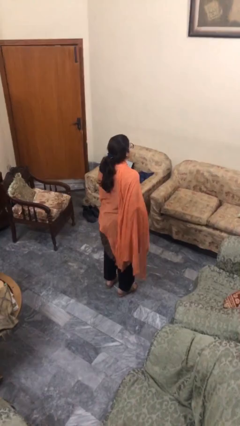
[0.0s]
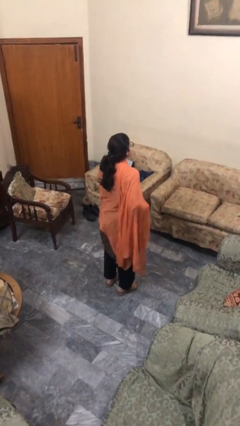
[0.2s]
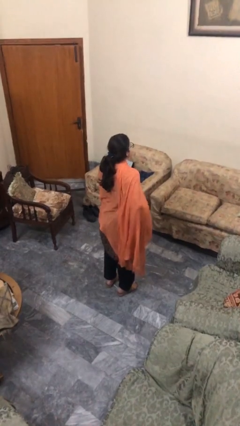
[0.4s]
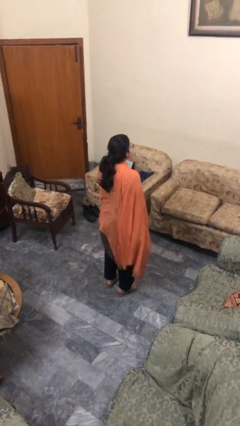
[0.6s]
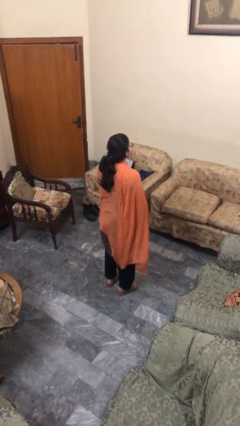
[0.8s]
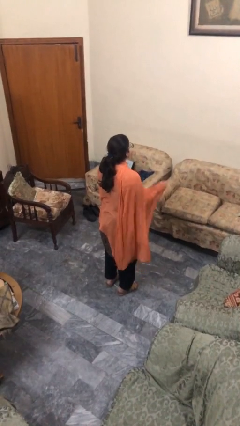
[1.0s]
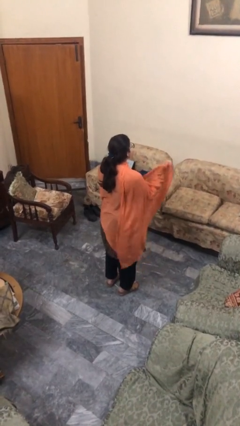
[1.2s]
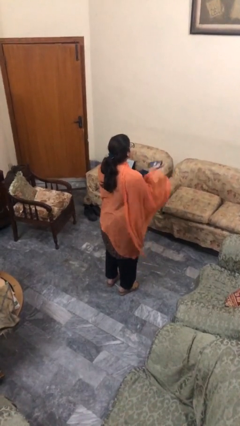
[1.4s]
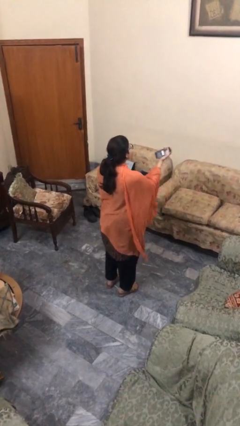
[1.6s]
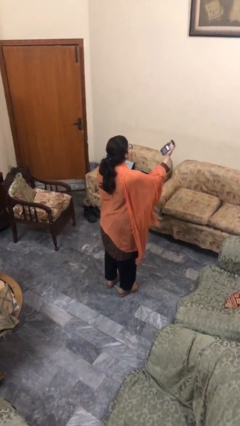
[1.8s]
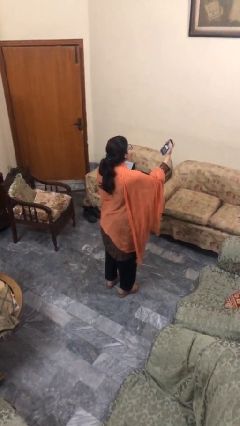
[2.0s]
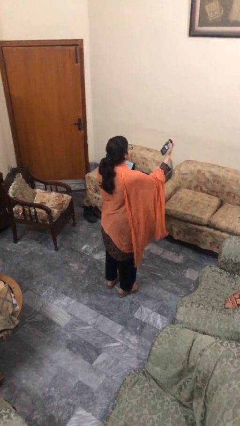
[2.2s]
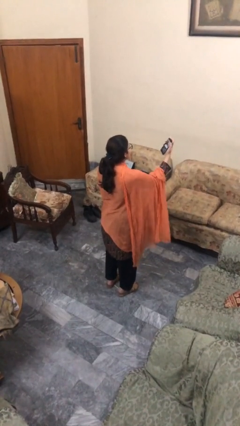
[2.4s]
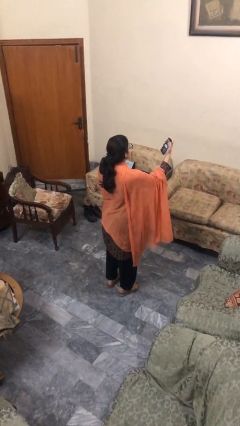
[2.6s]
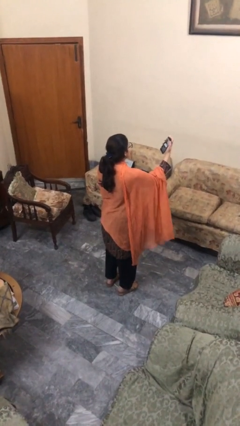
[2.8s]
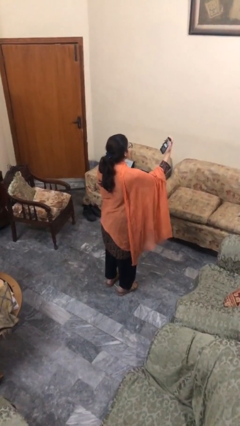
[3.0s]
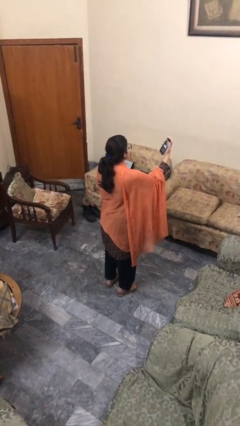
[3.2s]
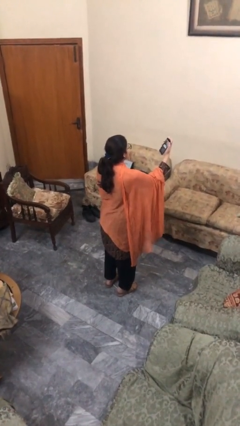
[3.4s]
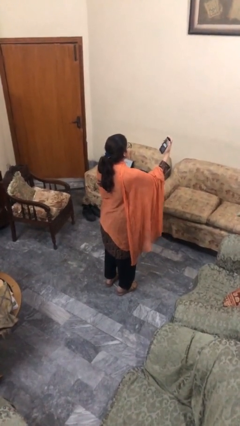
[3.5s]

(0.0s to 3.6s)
person takes phone from pocket

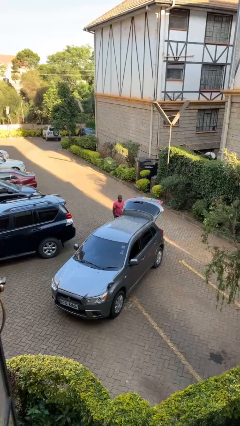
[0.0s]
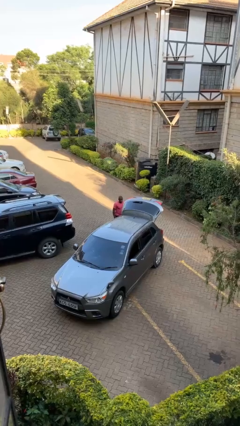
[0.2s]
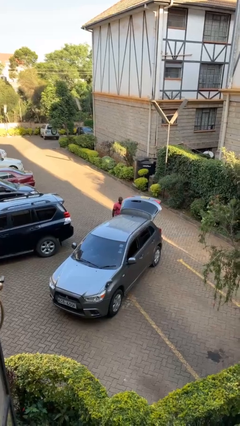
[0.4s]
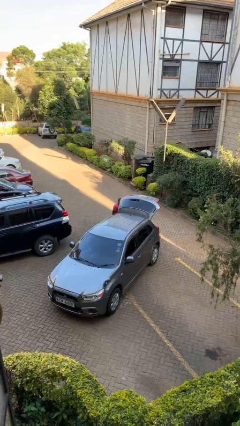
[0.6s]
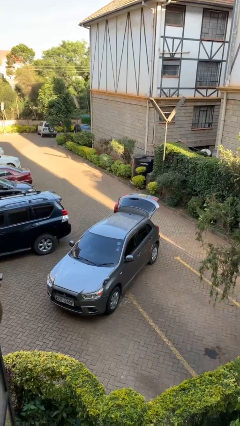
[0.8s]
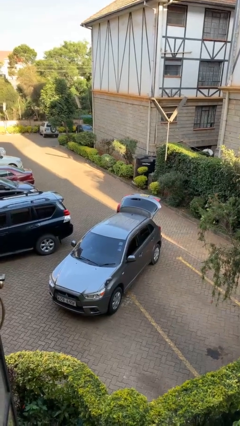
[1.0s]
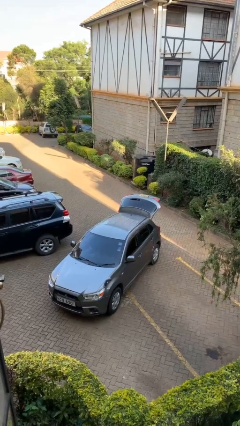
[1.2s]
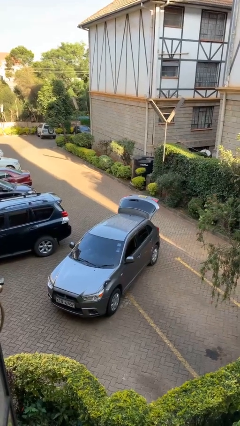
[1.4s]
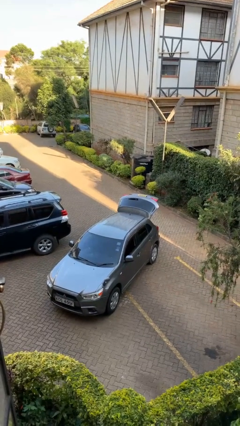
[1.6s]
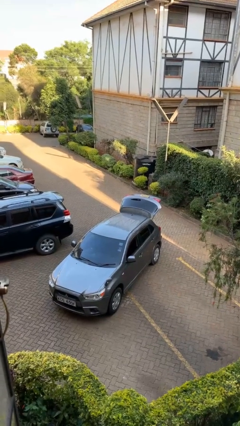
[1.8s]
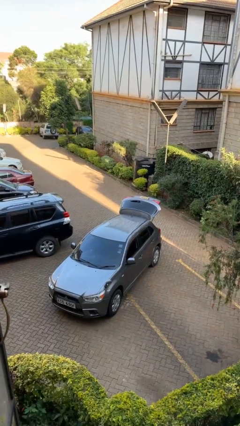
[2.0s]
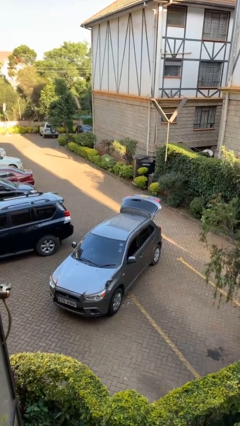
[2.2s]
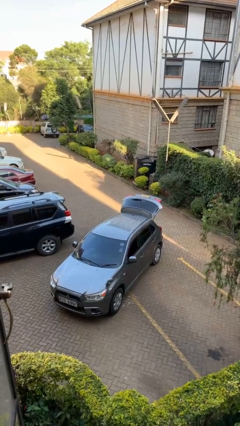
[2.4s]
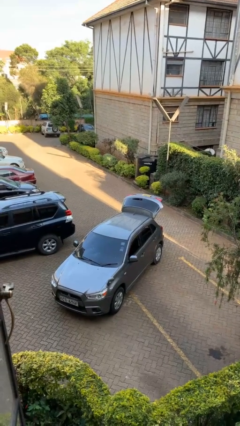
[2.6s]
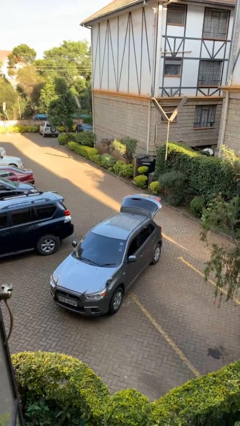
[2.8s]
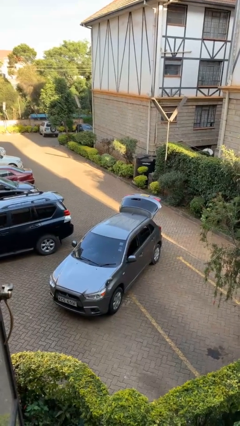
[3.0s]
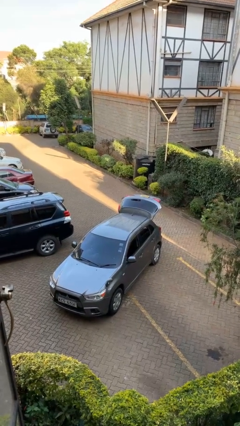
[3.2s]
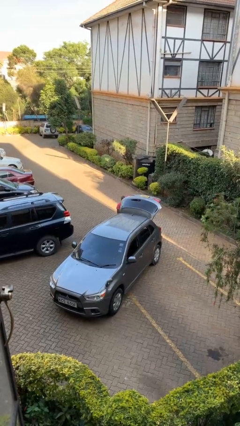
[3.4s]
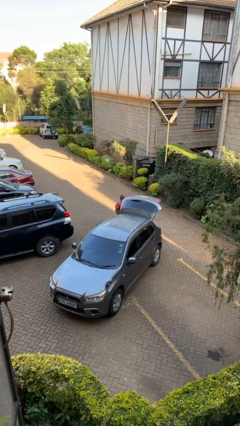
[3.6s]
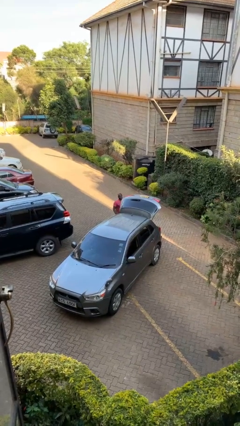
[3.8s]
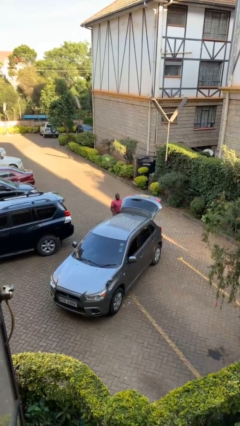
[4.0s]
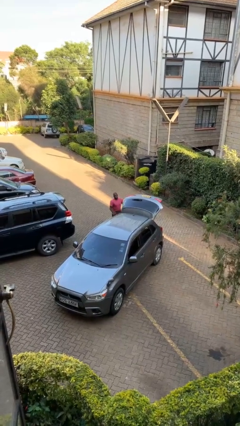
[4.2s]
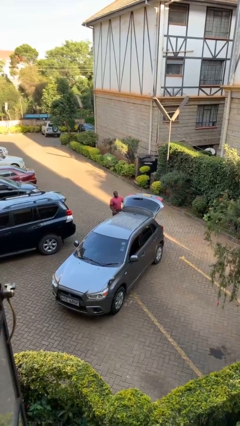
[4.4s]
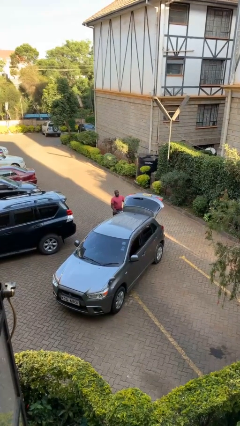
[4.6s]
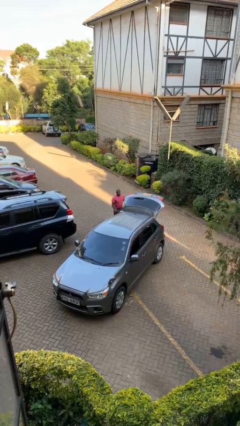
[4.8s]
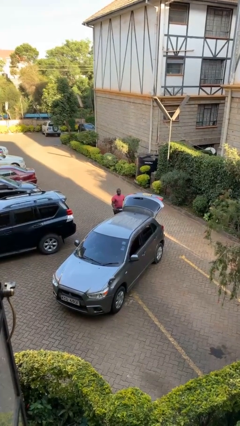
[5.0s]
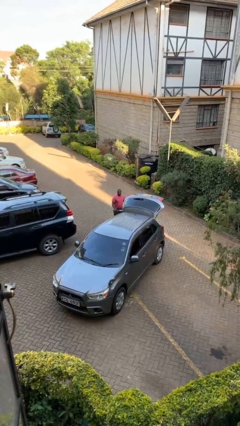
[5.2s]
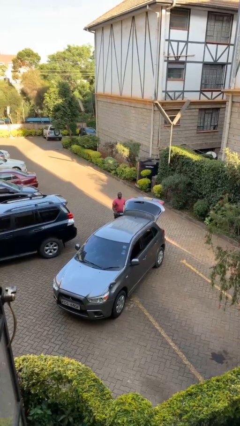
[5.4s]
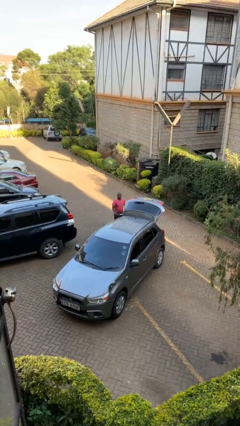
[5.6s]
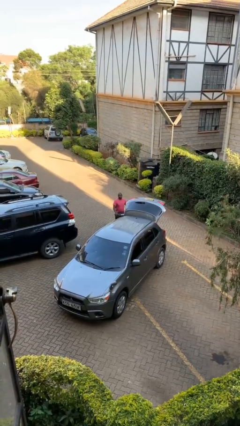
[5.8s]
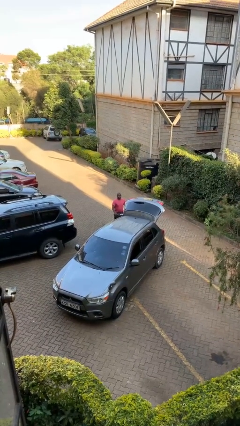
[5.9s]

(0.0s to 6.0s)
person unloads car

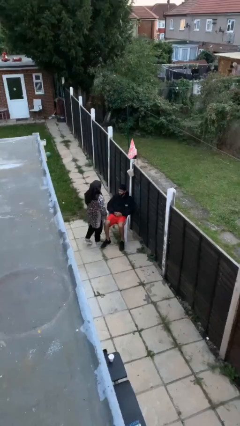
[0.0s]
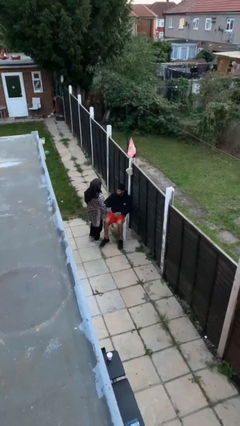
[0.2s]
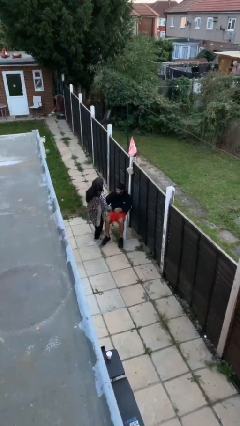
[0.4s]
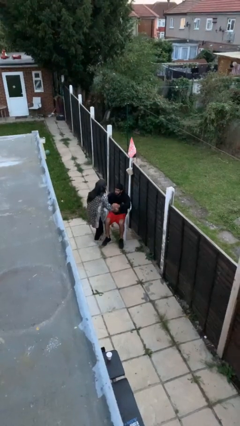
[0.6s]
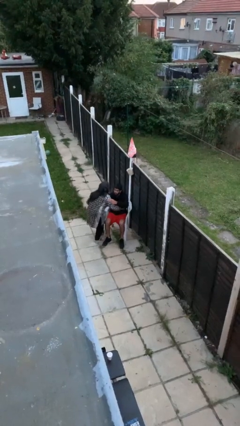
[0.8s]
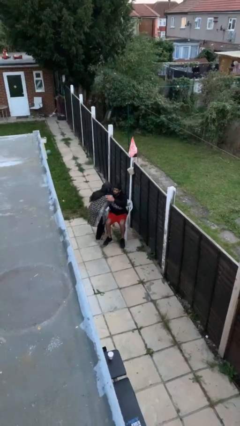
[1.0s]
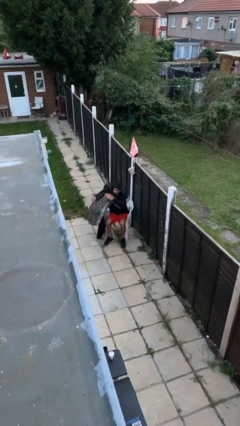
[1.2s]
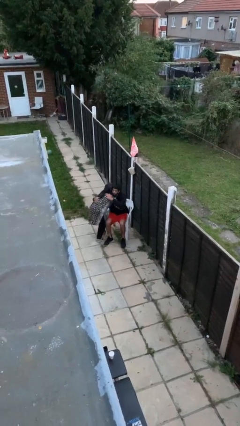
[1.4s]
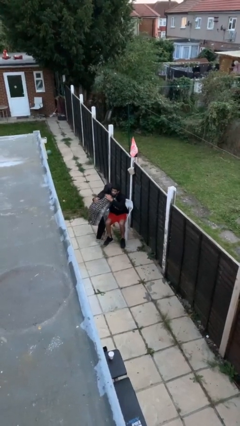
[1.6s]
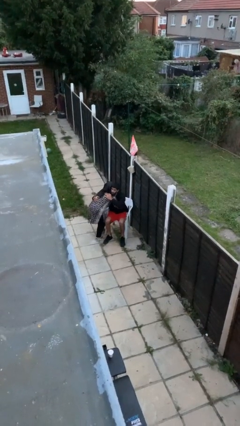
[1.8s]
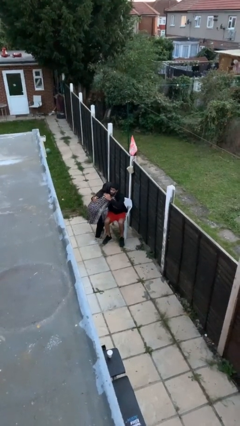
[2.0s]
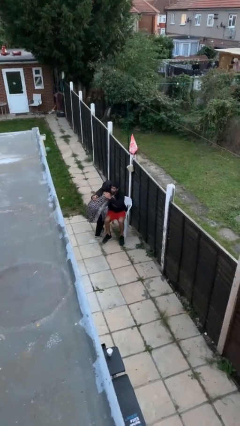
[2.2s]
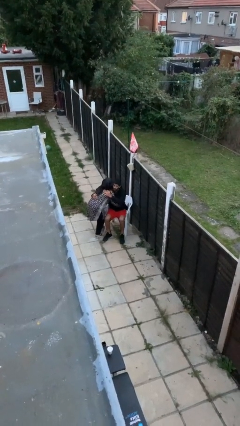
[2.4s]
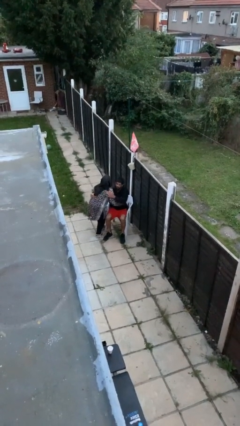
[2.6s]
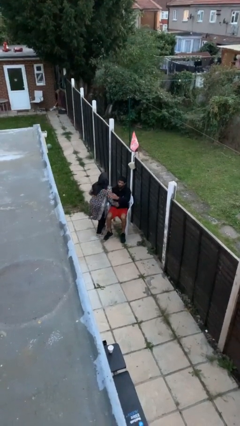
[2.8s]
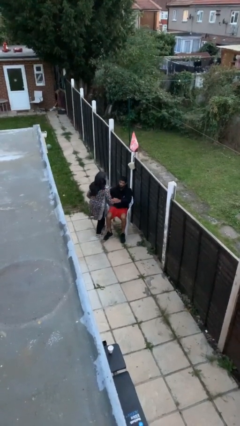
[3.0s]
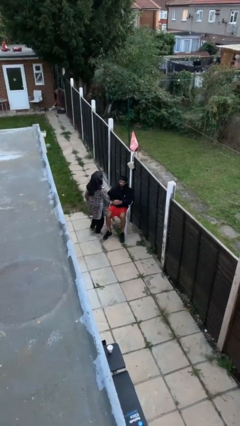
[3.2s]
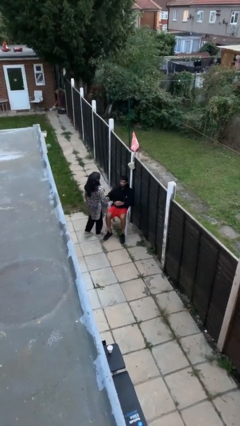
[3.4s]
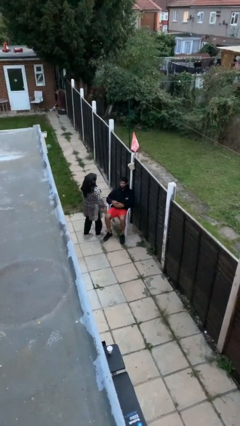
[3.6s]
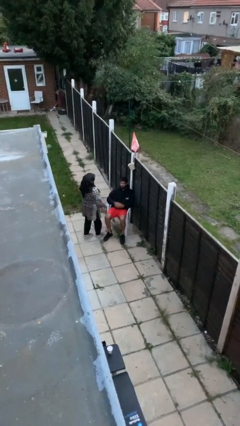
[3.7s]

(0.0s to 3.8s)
person embraces person

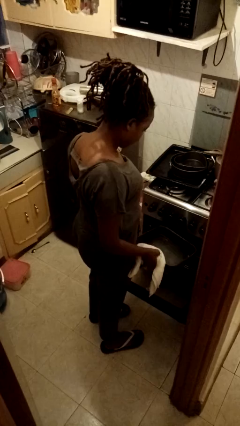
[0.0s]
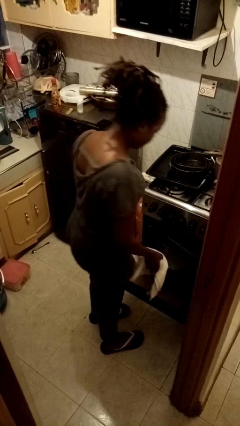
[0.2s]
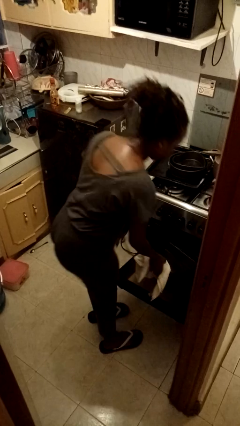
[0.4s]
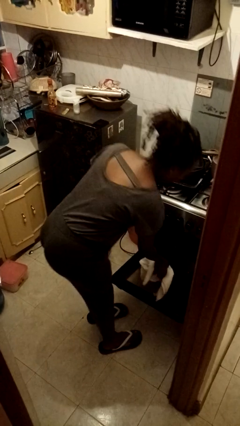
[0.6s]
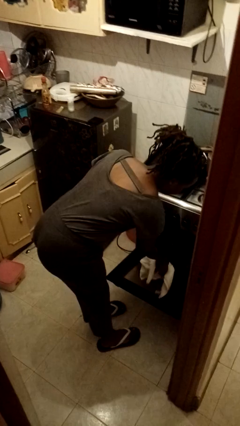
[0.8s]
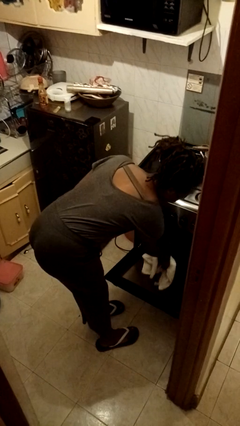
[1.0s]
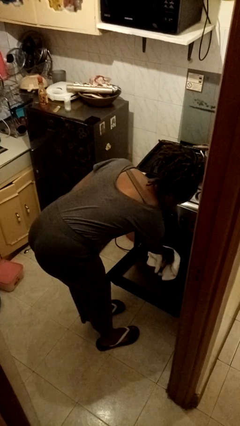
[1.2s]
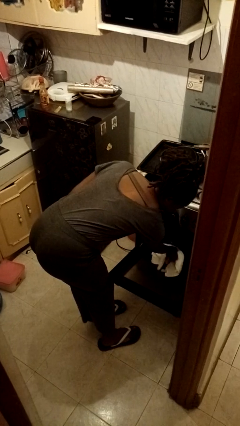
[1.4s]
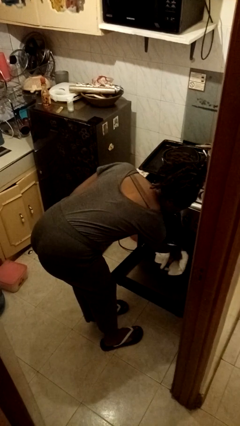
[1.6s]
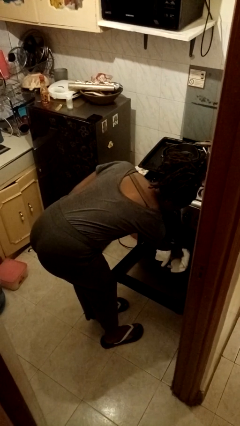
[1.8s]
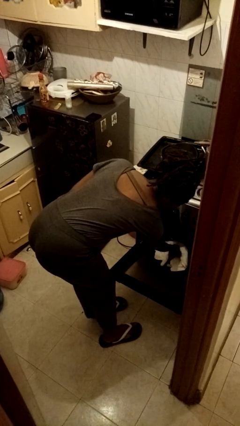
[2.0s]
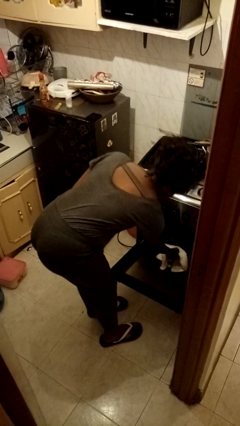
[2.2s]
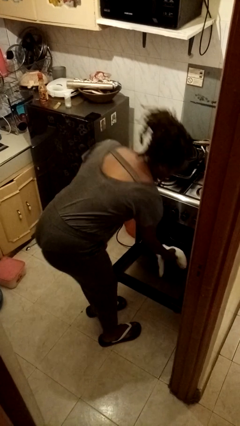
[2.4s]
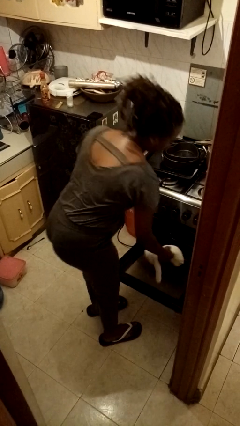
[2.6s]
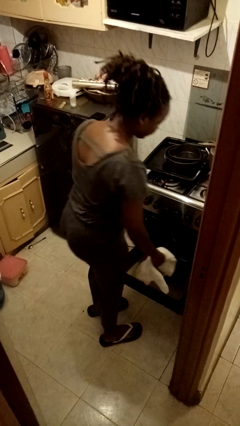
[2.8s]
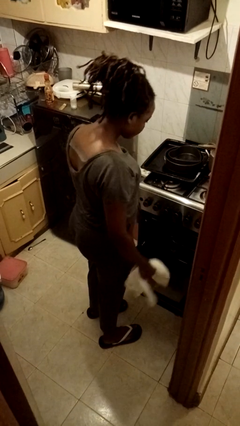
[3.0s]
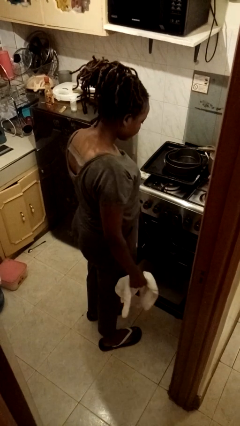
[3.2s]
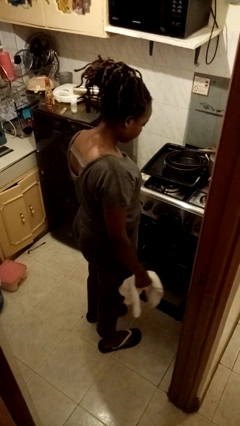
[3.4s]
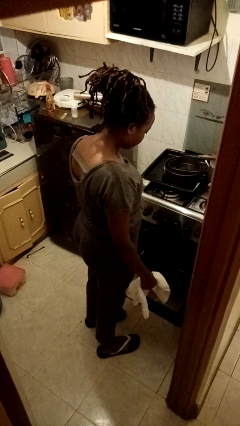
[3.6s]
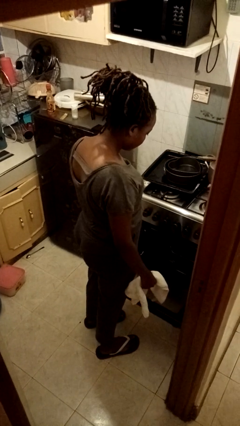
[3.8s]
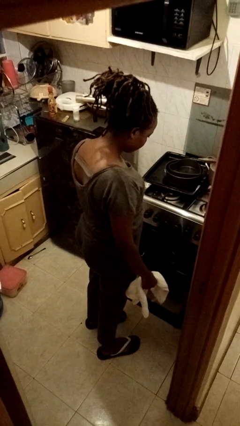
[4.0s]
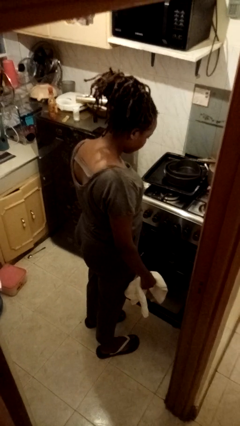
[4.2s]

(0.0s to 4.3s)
person puts object into oven

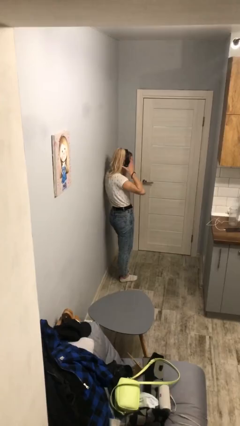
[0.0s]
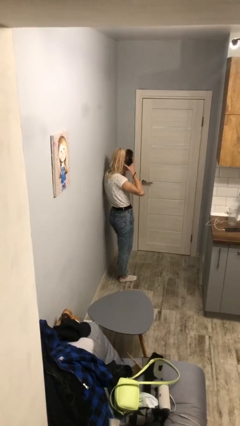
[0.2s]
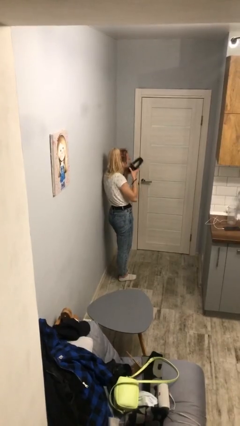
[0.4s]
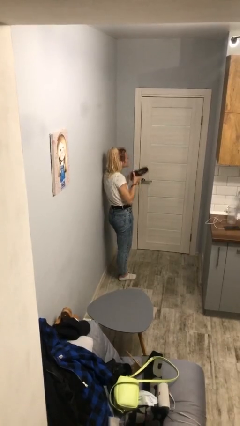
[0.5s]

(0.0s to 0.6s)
person takes off headphones
